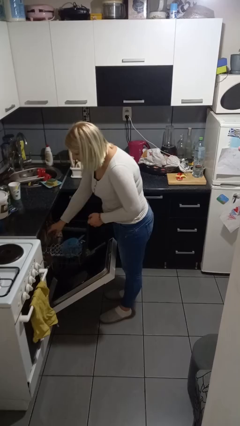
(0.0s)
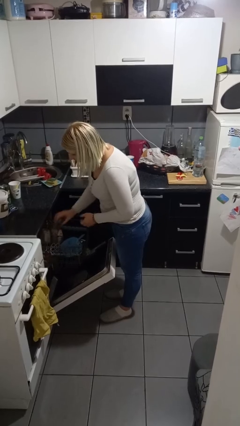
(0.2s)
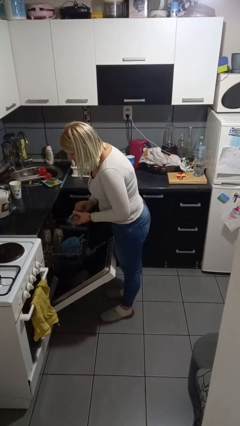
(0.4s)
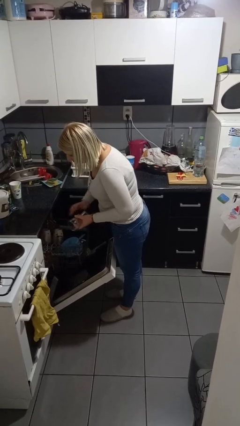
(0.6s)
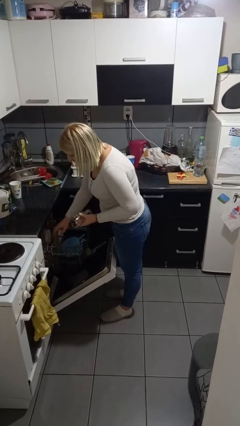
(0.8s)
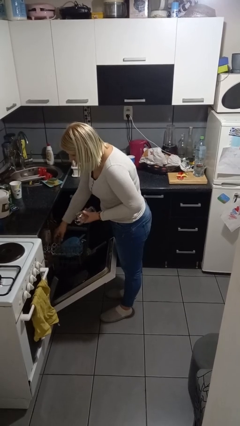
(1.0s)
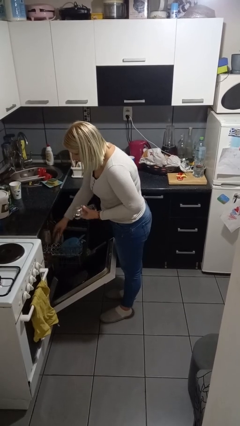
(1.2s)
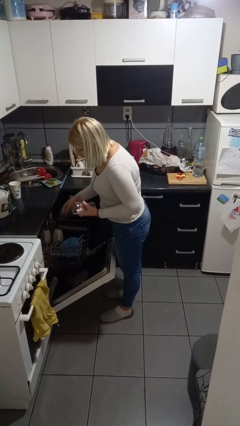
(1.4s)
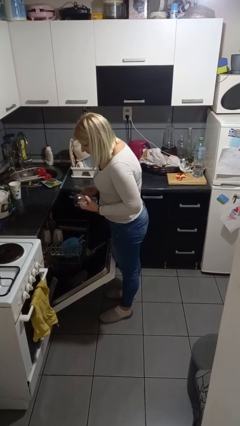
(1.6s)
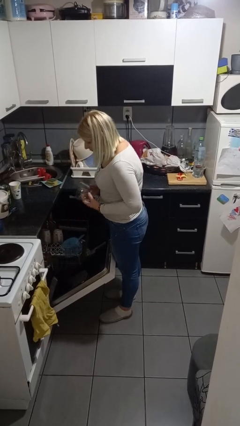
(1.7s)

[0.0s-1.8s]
person unloads dishwasher

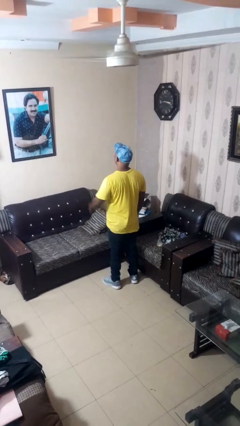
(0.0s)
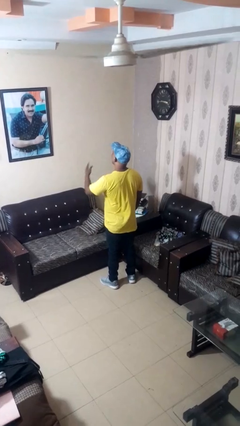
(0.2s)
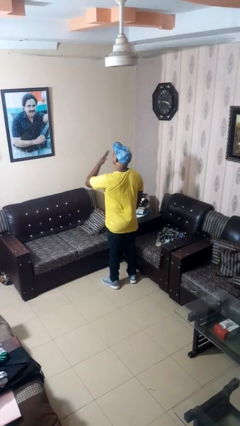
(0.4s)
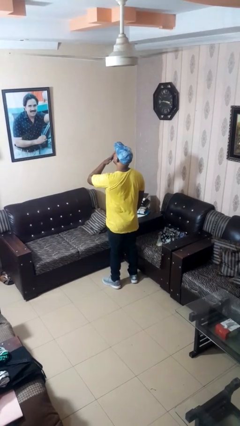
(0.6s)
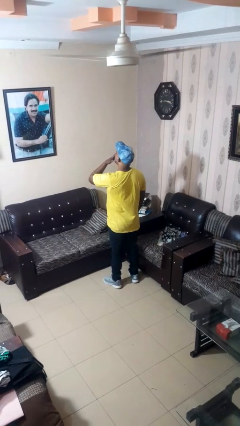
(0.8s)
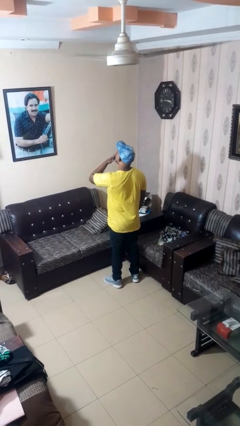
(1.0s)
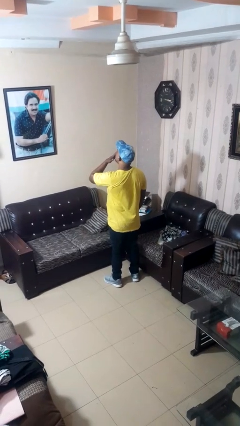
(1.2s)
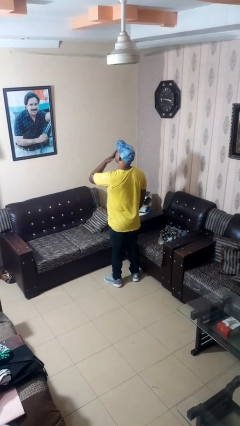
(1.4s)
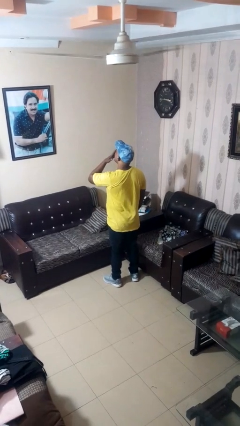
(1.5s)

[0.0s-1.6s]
person yawns

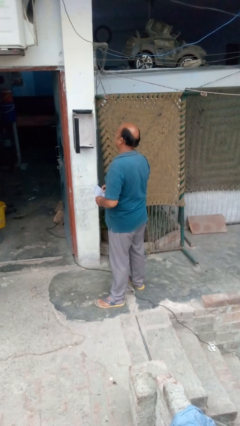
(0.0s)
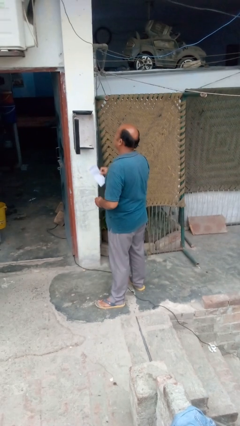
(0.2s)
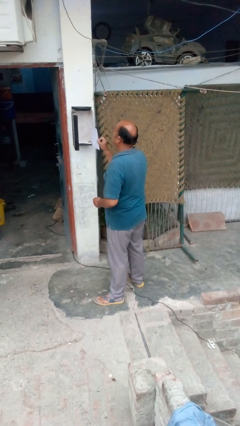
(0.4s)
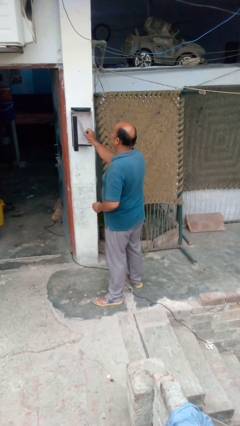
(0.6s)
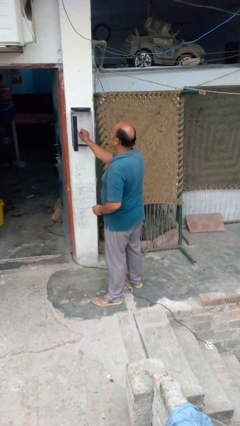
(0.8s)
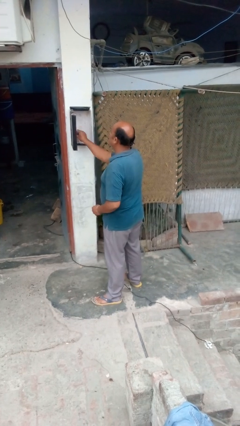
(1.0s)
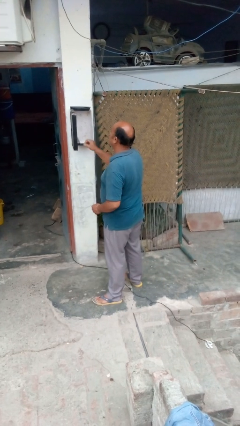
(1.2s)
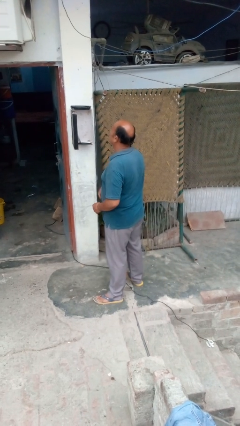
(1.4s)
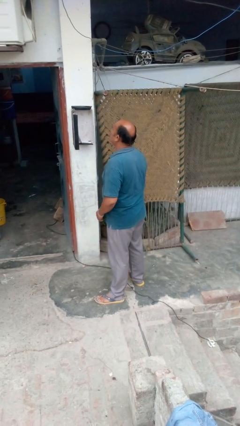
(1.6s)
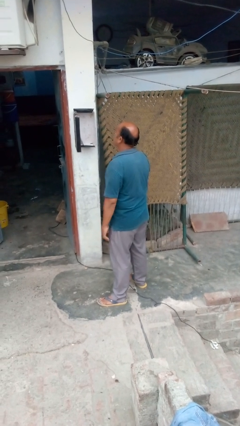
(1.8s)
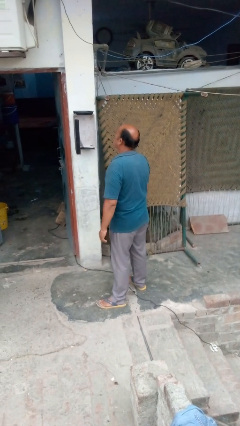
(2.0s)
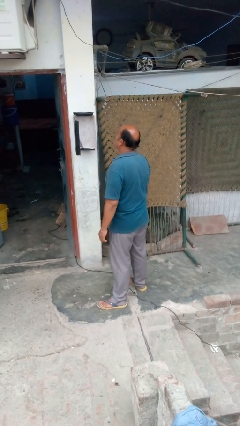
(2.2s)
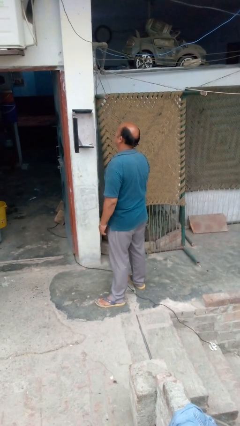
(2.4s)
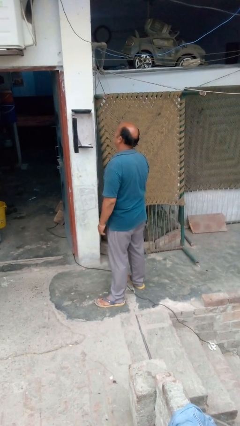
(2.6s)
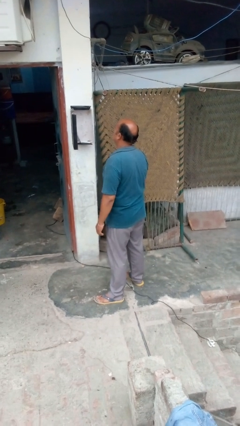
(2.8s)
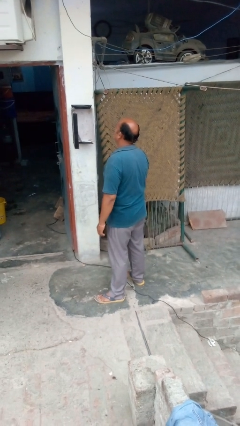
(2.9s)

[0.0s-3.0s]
person puts letters in mailbox

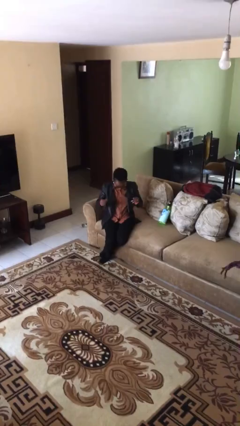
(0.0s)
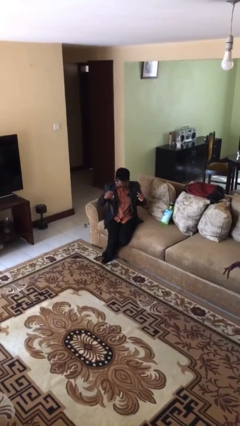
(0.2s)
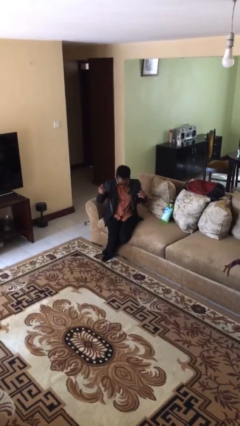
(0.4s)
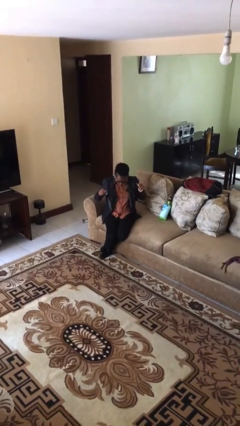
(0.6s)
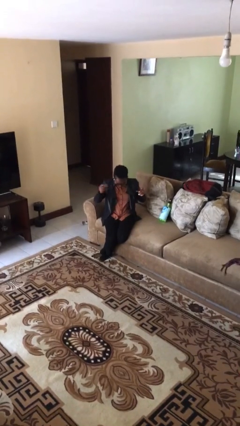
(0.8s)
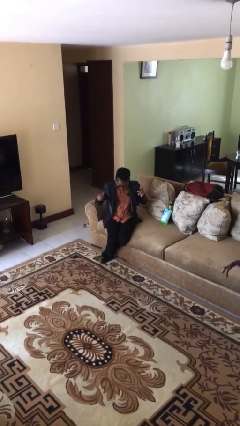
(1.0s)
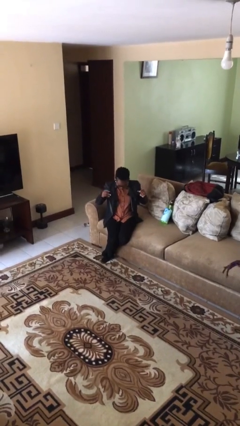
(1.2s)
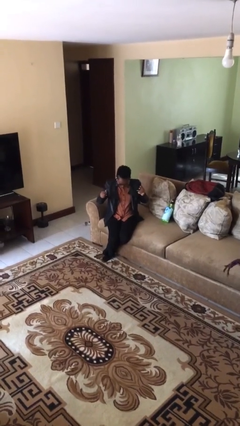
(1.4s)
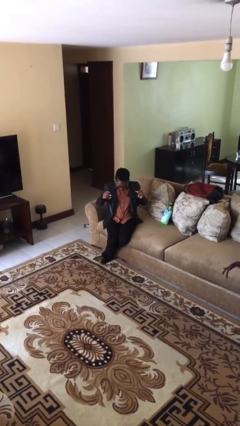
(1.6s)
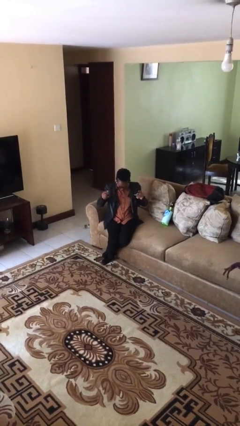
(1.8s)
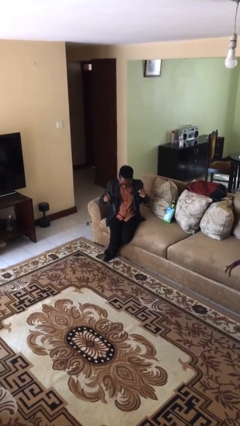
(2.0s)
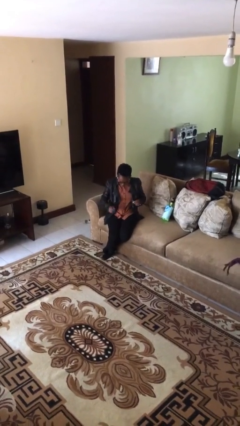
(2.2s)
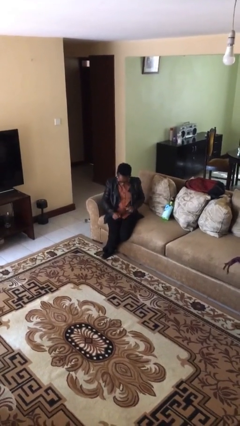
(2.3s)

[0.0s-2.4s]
person snaps fingers

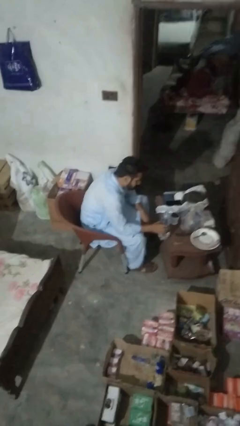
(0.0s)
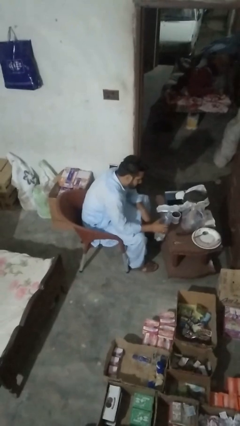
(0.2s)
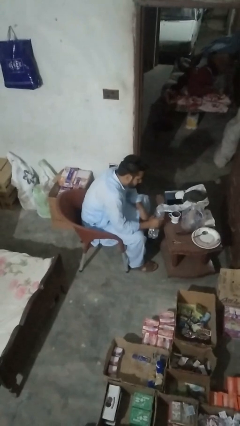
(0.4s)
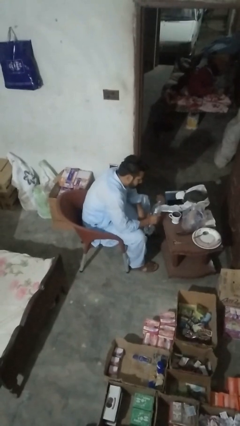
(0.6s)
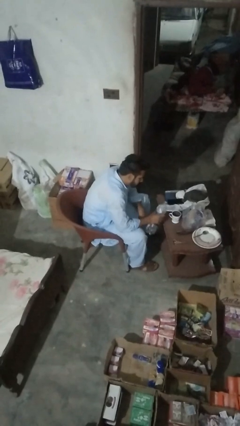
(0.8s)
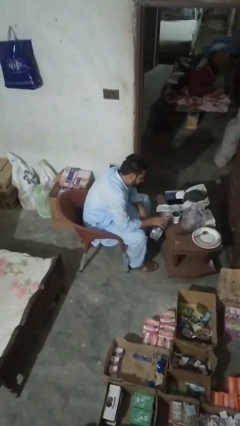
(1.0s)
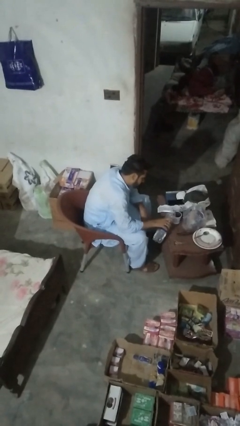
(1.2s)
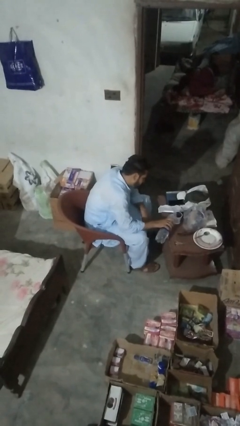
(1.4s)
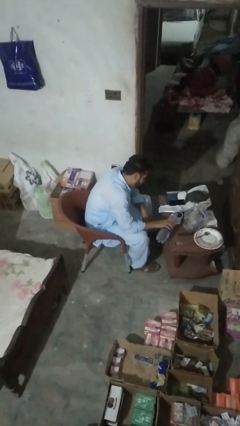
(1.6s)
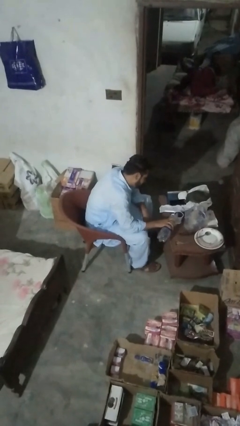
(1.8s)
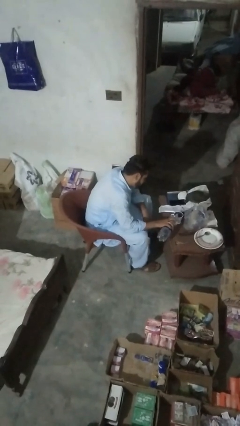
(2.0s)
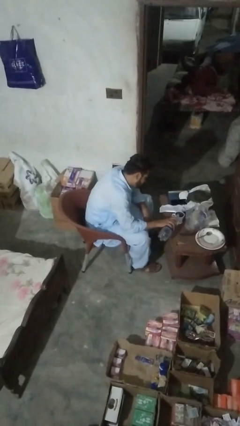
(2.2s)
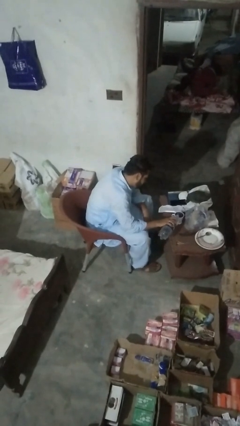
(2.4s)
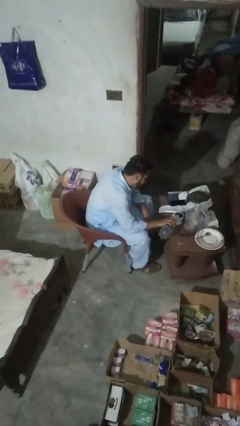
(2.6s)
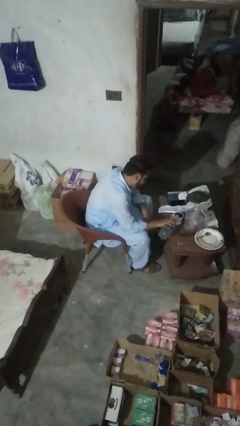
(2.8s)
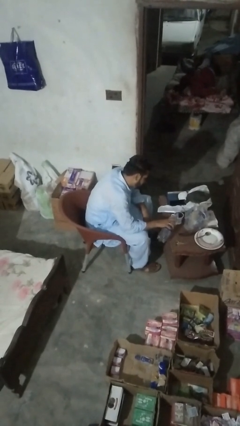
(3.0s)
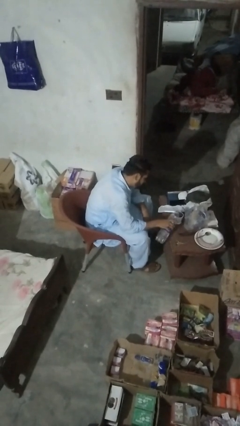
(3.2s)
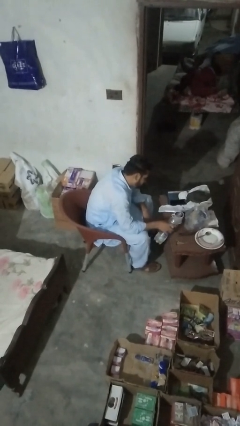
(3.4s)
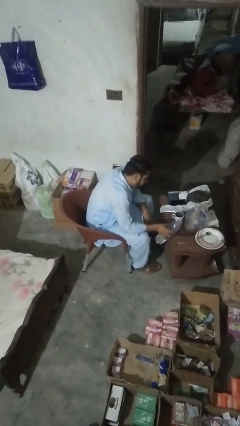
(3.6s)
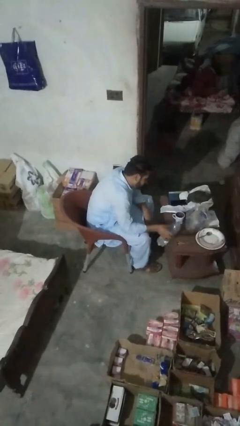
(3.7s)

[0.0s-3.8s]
person pours liquid into cup

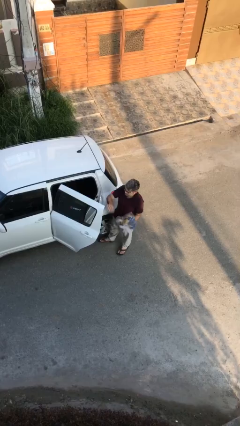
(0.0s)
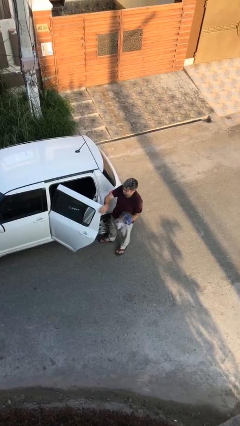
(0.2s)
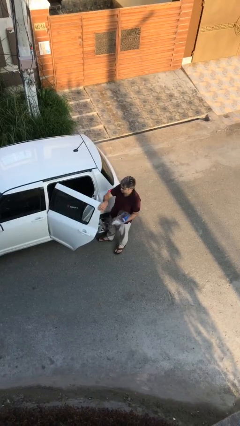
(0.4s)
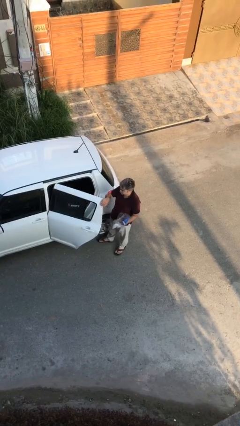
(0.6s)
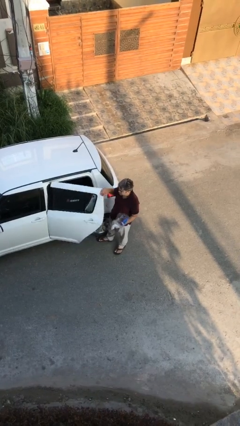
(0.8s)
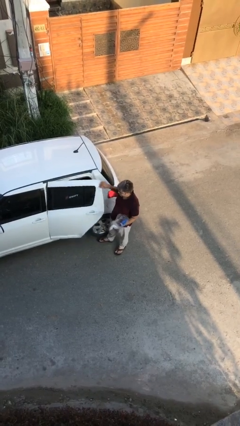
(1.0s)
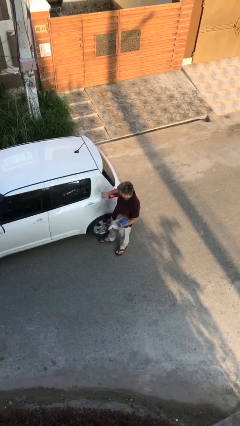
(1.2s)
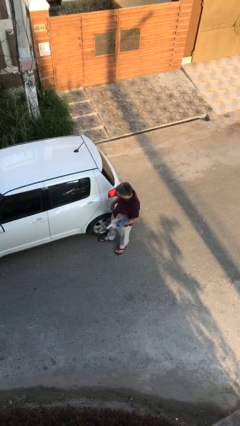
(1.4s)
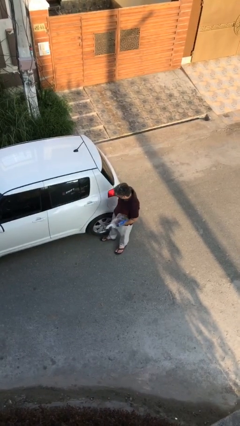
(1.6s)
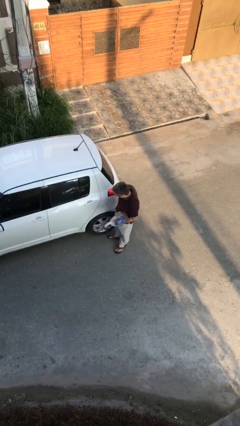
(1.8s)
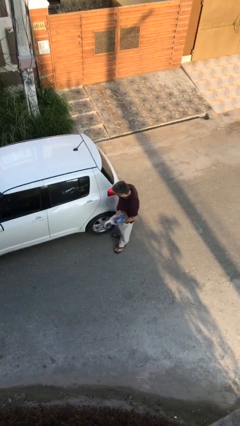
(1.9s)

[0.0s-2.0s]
person closes car door

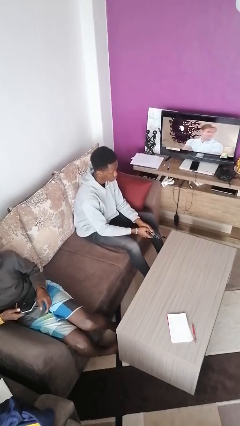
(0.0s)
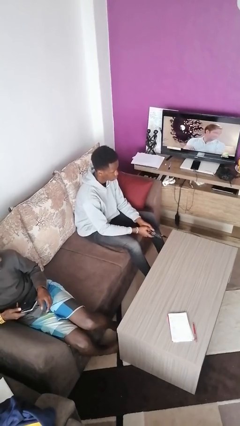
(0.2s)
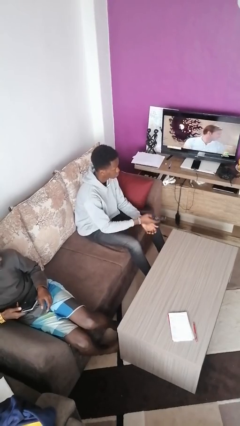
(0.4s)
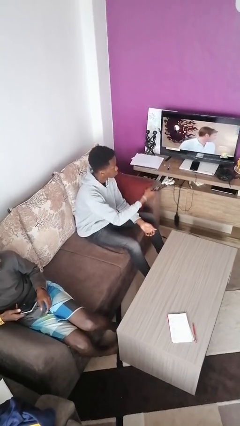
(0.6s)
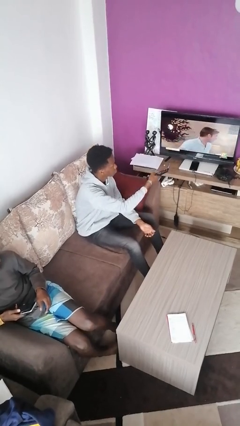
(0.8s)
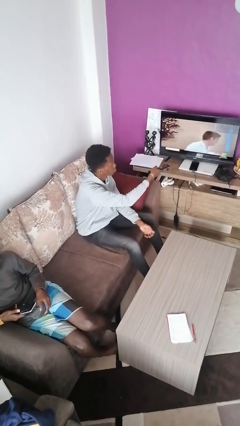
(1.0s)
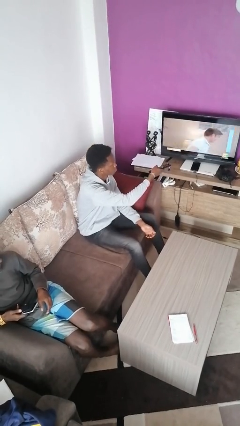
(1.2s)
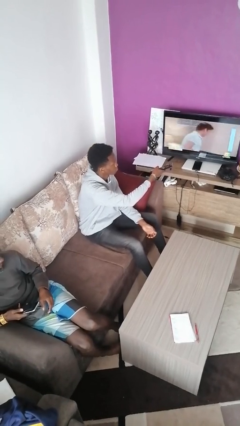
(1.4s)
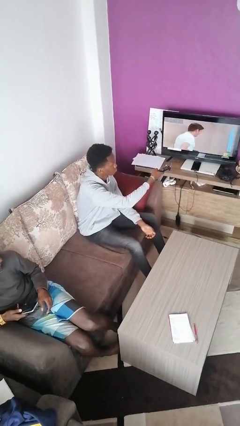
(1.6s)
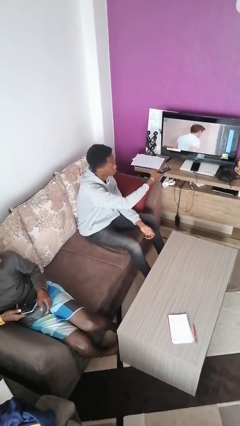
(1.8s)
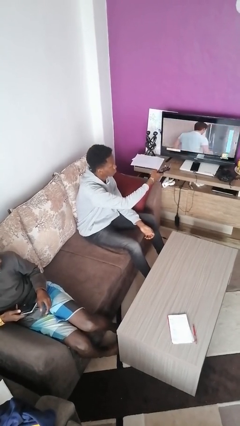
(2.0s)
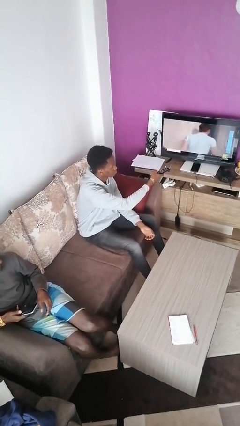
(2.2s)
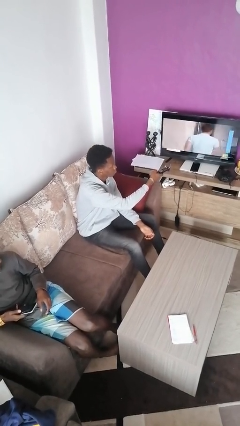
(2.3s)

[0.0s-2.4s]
person uses television remote

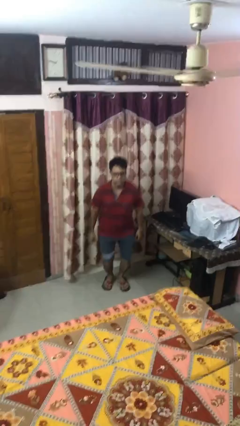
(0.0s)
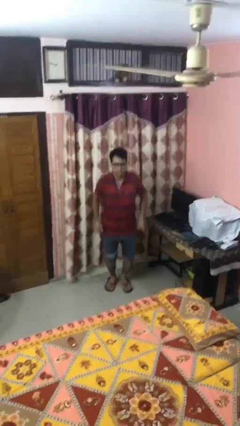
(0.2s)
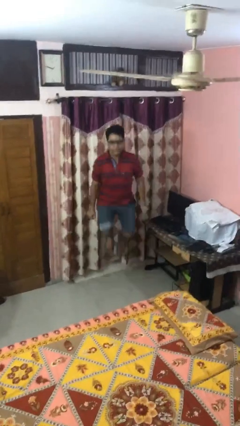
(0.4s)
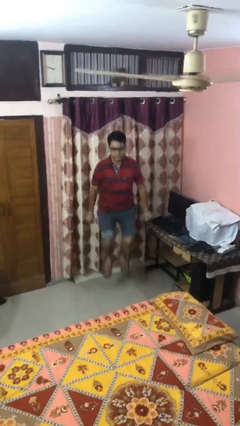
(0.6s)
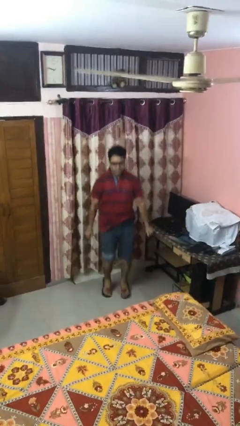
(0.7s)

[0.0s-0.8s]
person jumps
